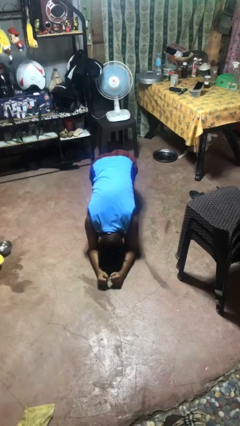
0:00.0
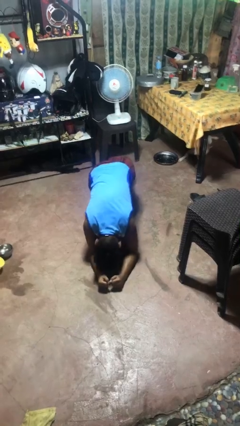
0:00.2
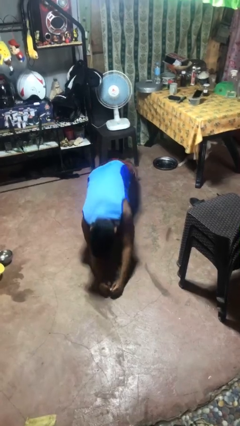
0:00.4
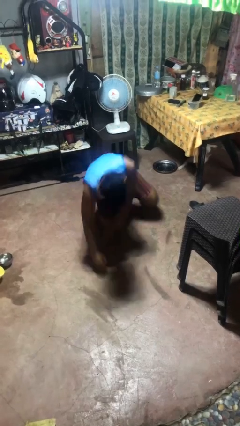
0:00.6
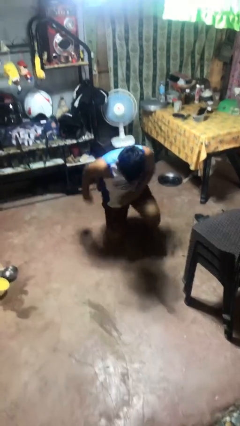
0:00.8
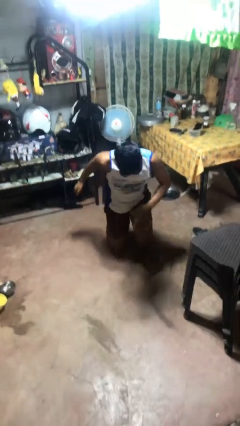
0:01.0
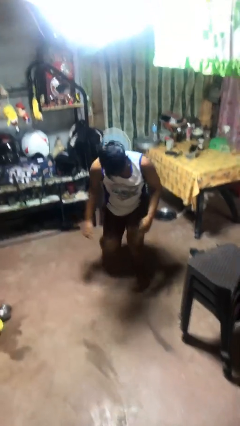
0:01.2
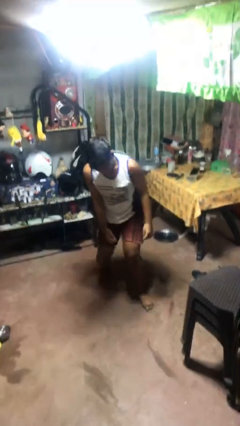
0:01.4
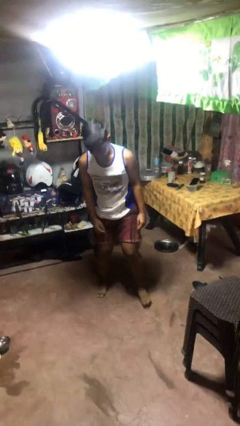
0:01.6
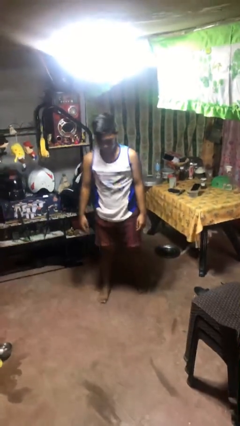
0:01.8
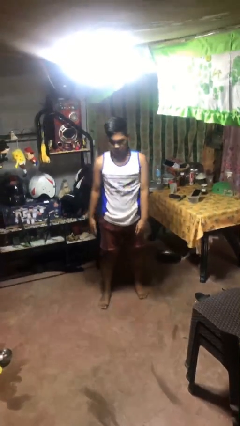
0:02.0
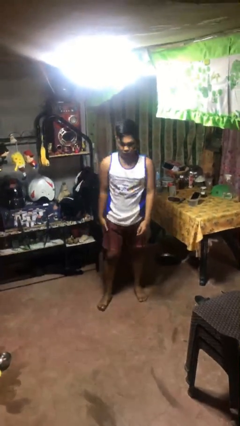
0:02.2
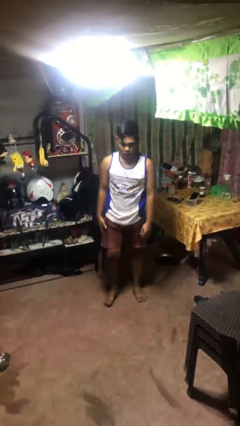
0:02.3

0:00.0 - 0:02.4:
person stands up from floor

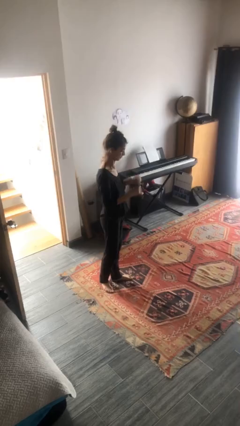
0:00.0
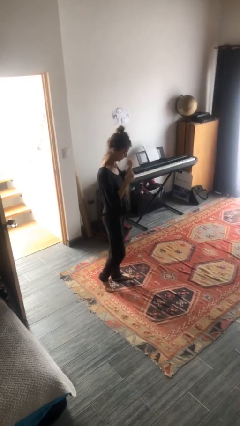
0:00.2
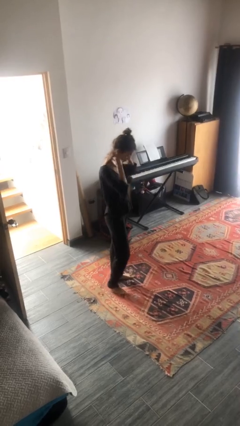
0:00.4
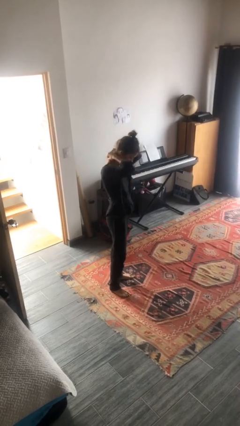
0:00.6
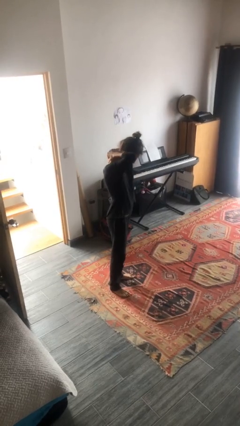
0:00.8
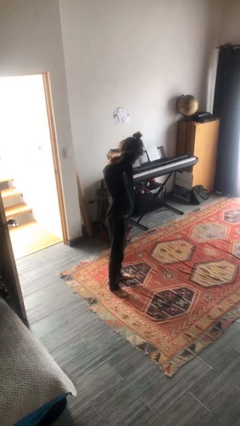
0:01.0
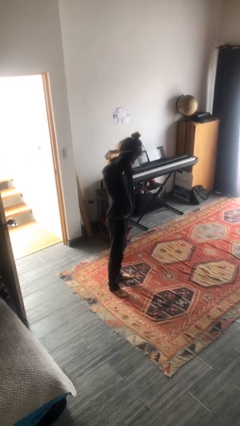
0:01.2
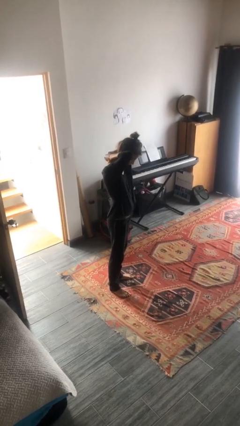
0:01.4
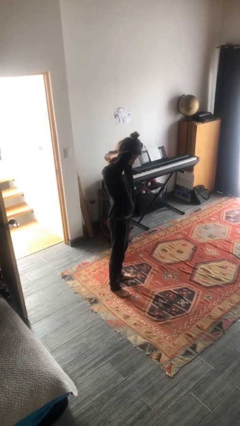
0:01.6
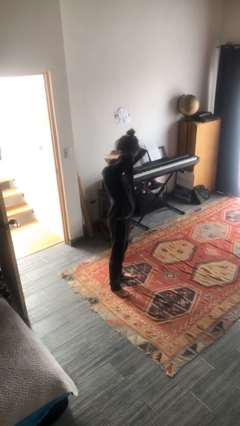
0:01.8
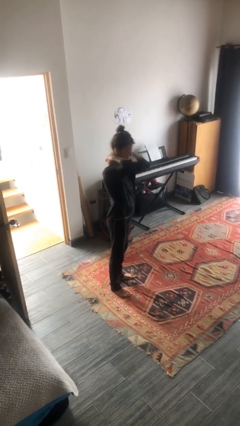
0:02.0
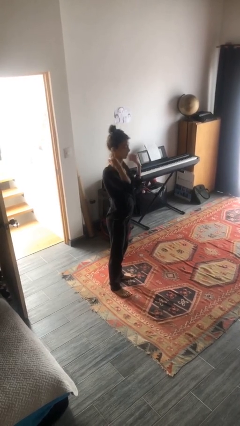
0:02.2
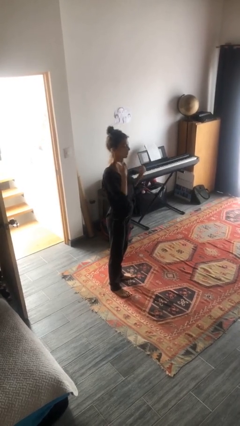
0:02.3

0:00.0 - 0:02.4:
person puts on necklace

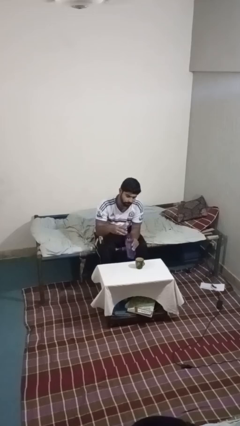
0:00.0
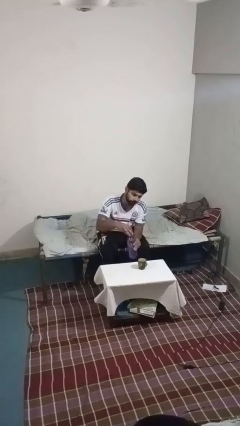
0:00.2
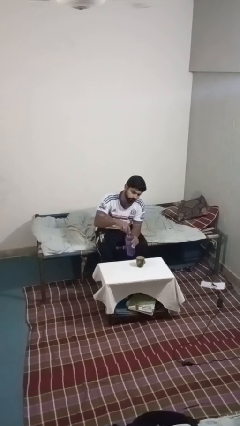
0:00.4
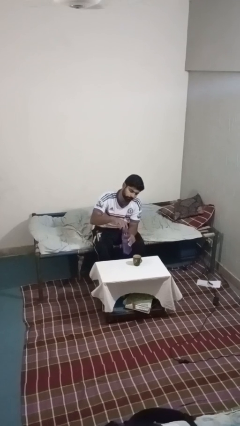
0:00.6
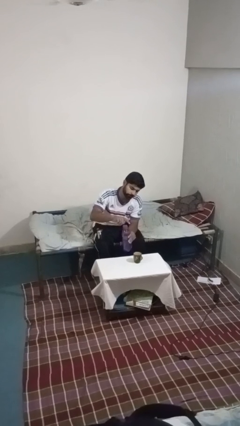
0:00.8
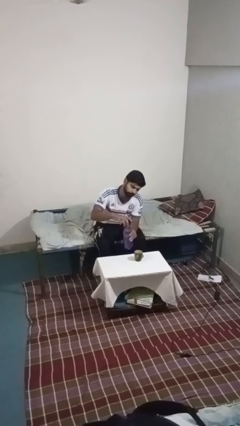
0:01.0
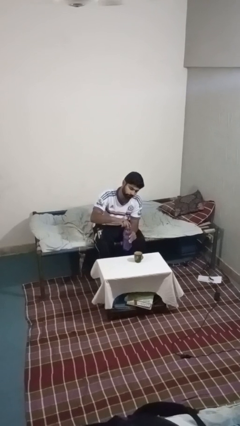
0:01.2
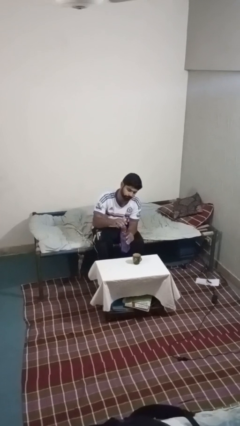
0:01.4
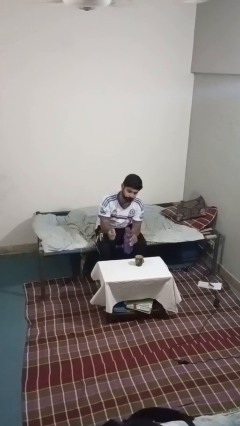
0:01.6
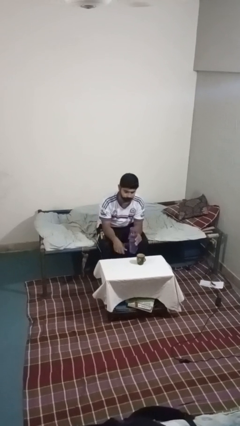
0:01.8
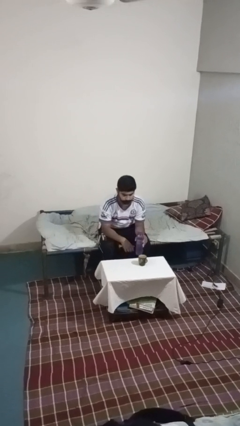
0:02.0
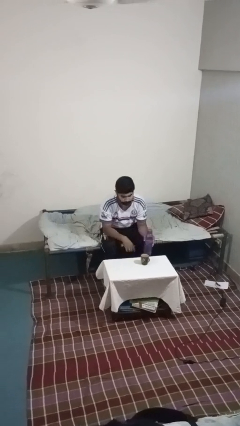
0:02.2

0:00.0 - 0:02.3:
person screws lid to bottle

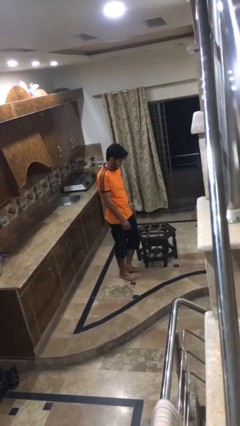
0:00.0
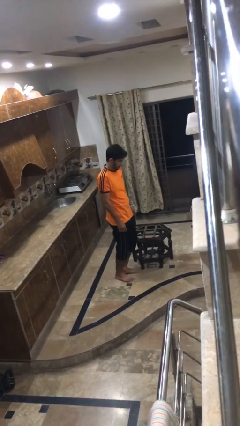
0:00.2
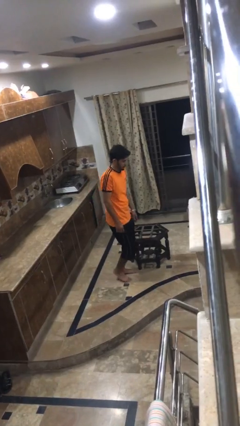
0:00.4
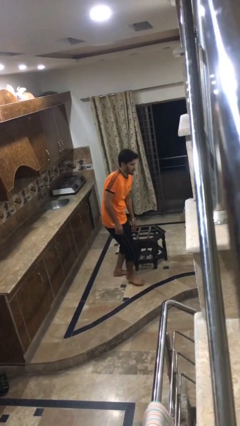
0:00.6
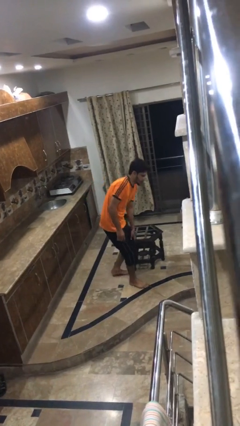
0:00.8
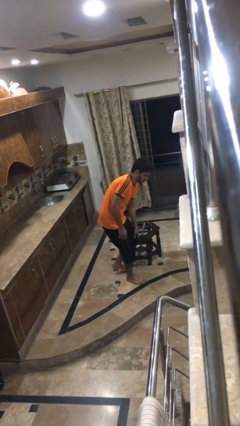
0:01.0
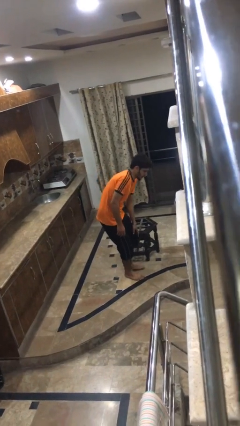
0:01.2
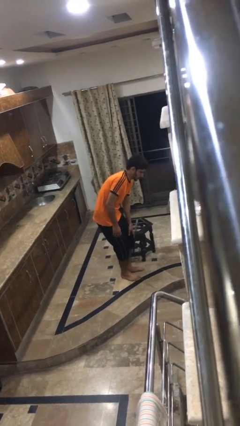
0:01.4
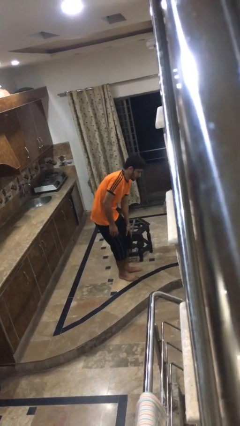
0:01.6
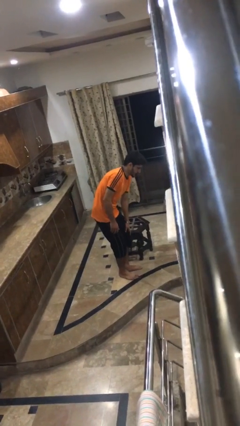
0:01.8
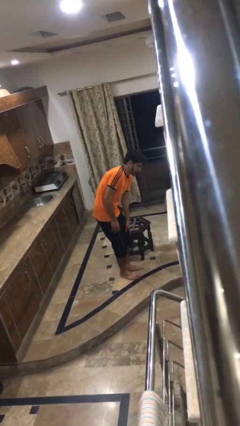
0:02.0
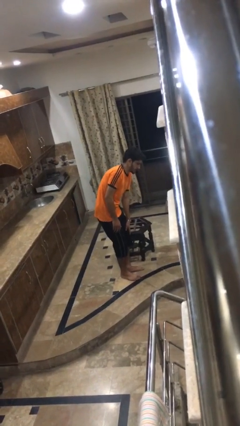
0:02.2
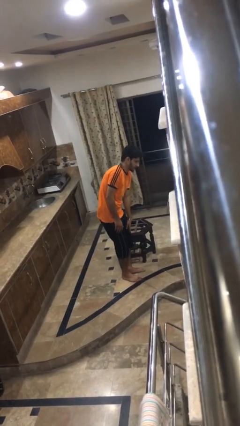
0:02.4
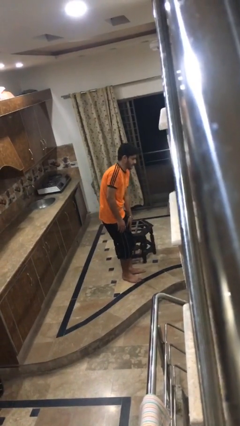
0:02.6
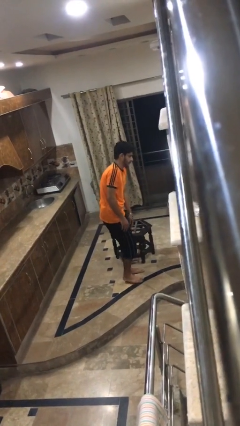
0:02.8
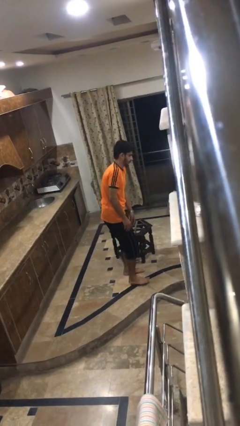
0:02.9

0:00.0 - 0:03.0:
person bumps into table

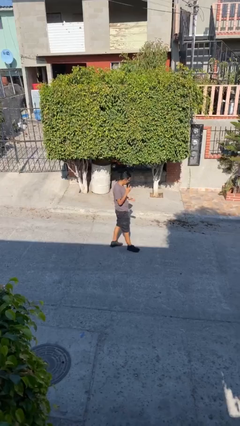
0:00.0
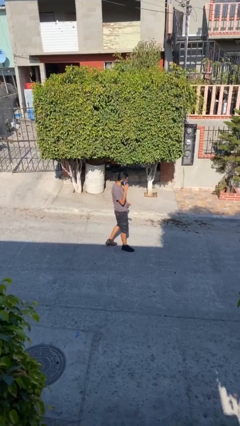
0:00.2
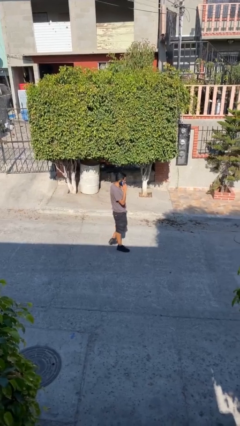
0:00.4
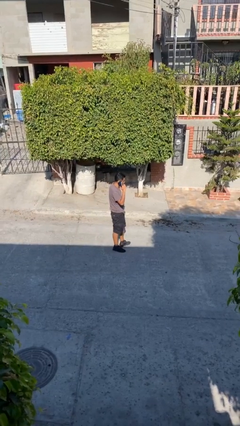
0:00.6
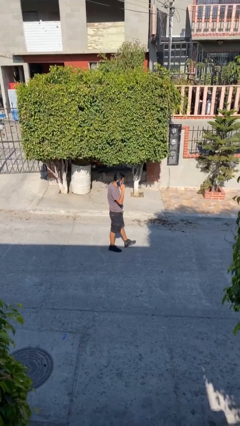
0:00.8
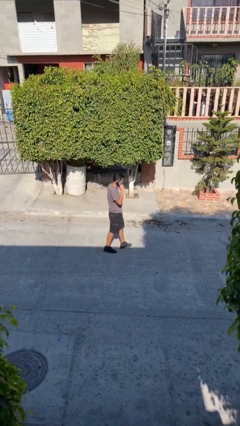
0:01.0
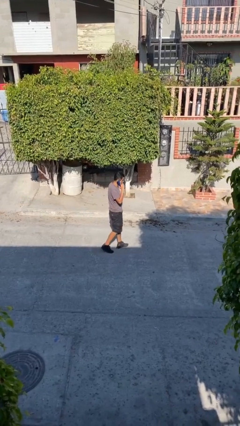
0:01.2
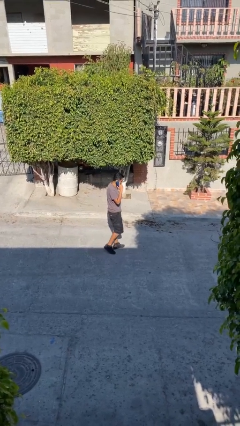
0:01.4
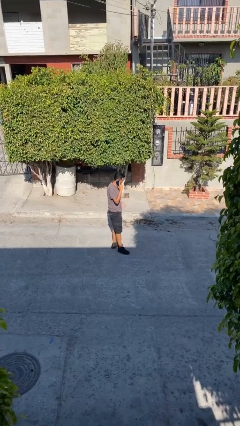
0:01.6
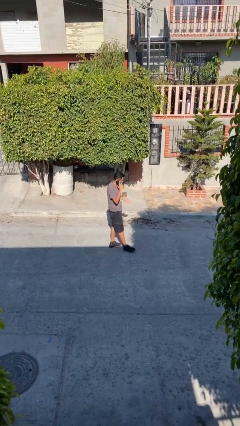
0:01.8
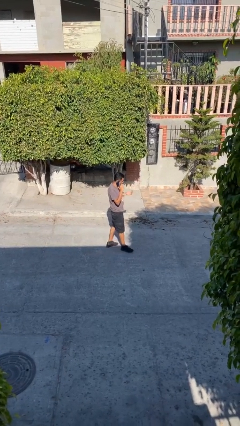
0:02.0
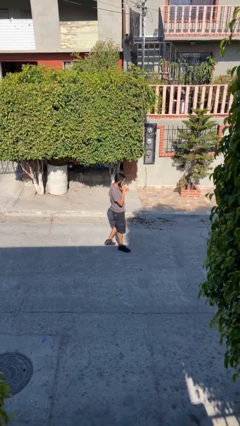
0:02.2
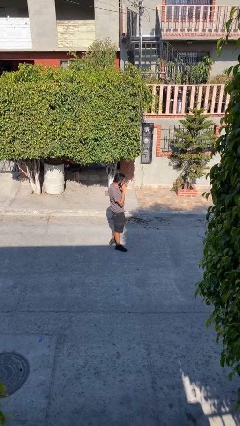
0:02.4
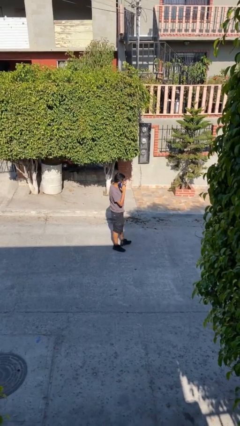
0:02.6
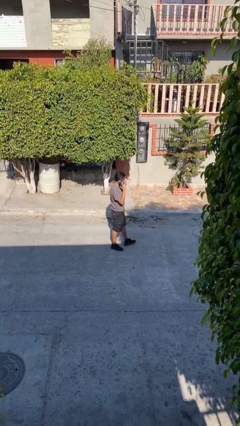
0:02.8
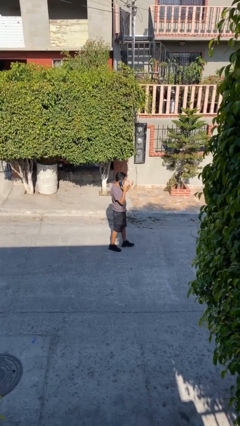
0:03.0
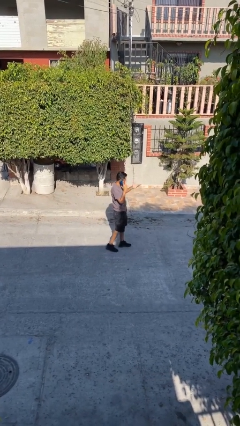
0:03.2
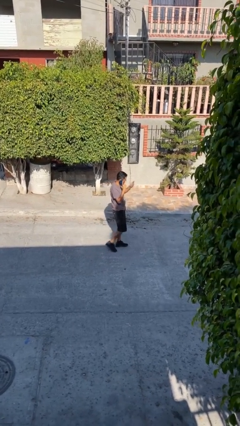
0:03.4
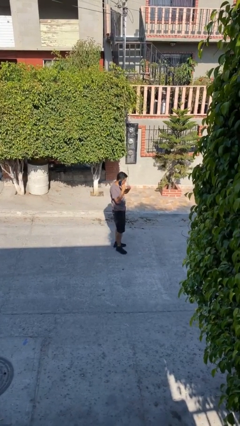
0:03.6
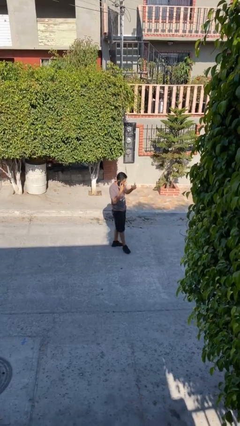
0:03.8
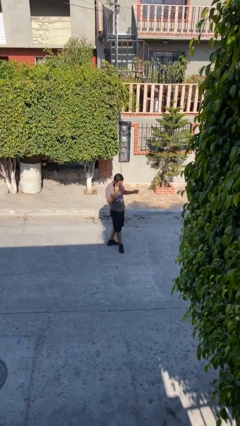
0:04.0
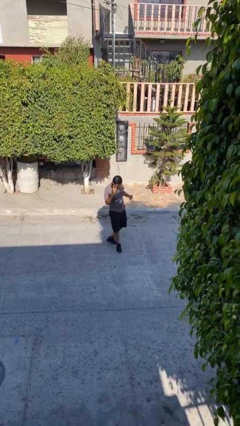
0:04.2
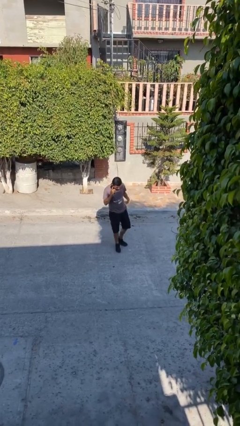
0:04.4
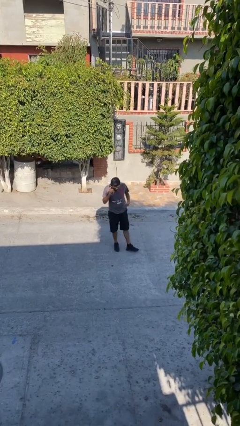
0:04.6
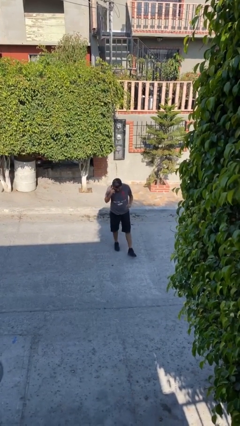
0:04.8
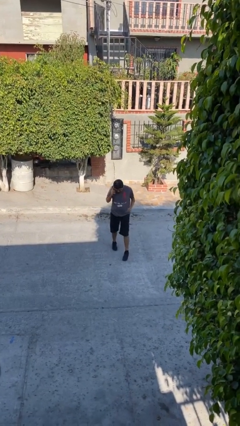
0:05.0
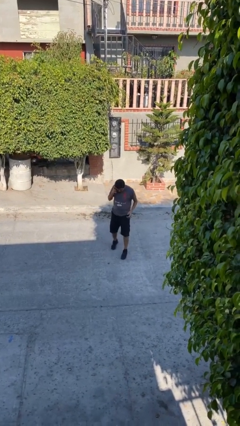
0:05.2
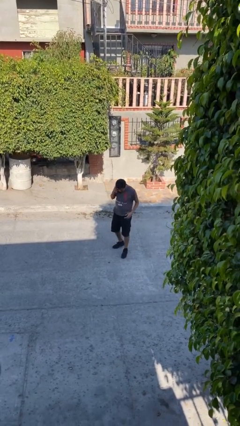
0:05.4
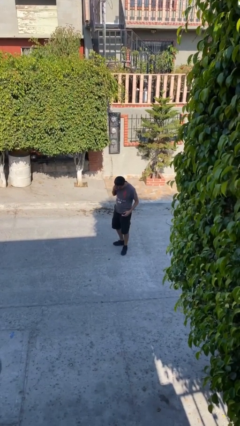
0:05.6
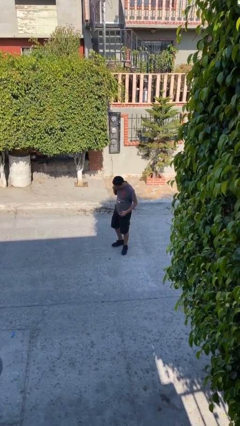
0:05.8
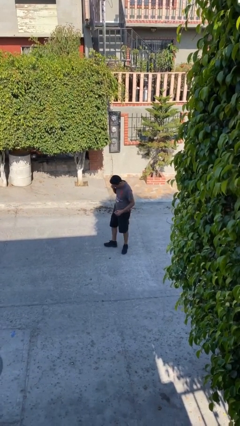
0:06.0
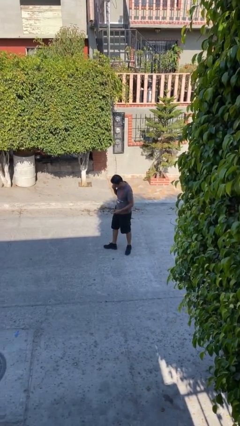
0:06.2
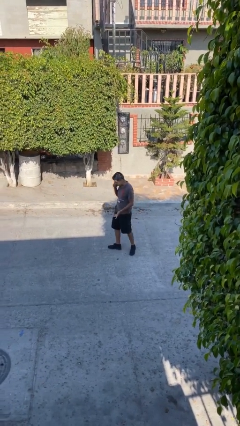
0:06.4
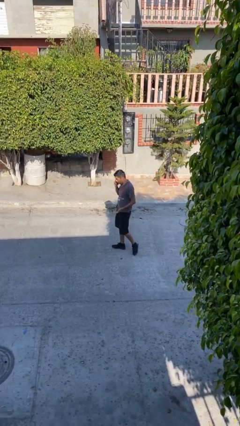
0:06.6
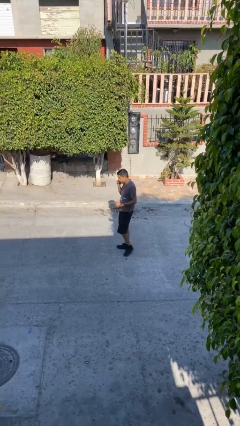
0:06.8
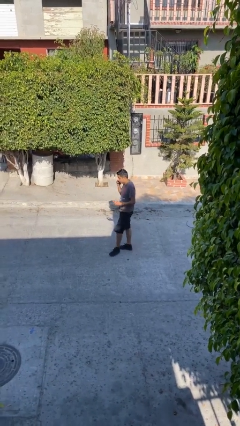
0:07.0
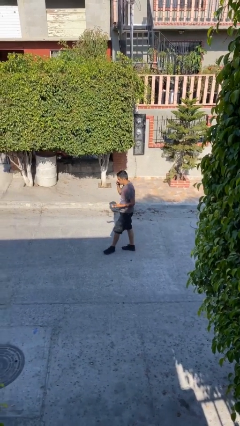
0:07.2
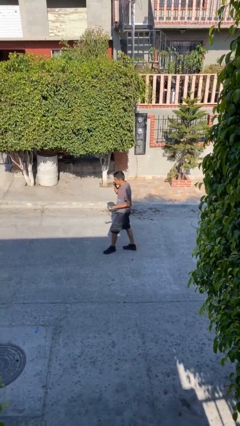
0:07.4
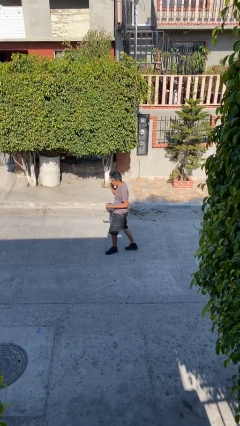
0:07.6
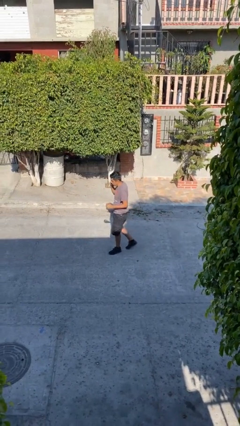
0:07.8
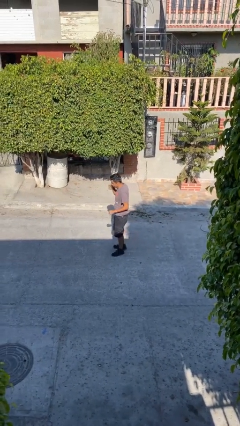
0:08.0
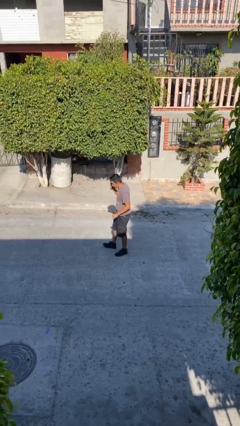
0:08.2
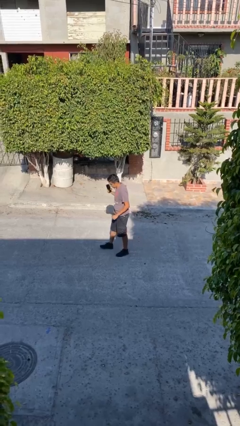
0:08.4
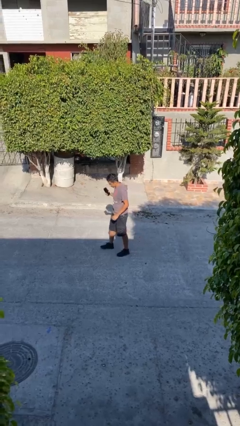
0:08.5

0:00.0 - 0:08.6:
person talks on phone
